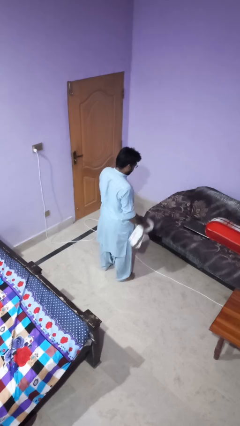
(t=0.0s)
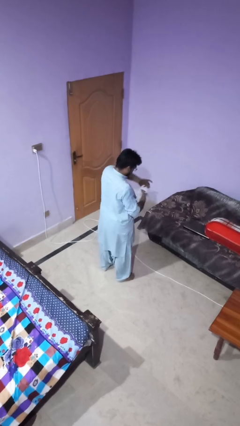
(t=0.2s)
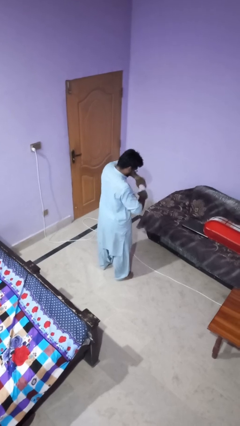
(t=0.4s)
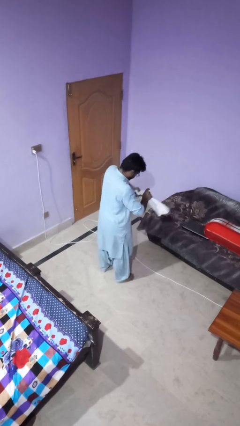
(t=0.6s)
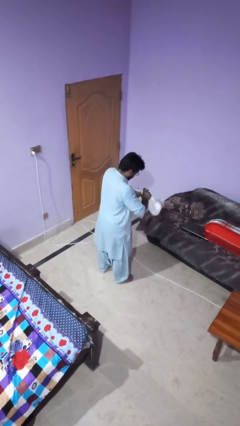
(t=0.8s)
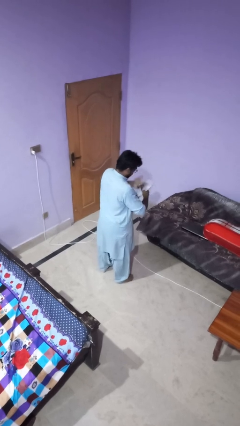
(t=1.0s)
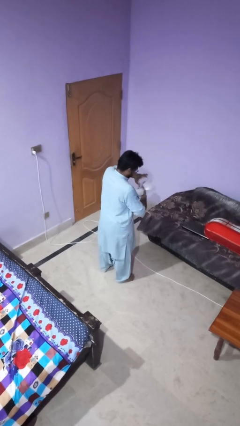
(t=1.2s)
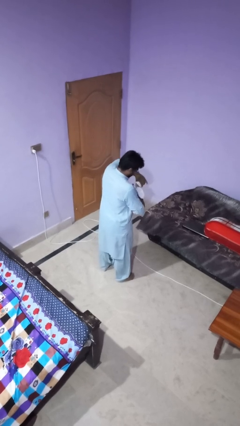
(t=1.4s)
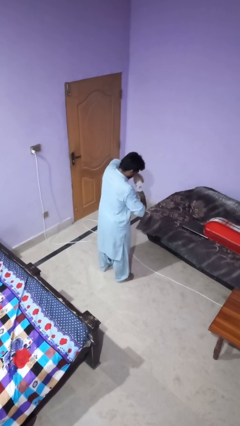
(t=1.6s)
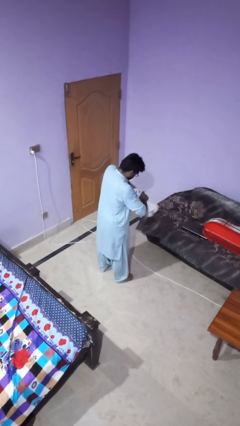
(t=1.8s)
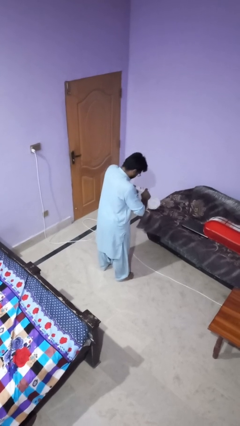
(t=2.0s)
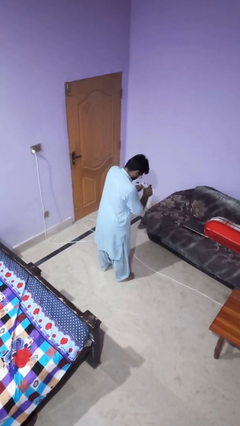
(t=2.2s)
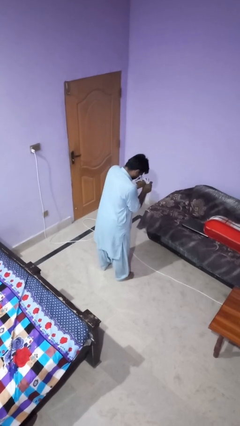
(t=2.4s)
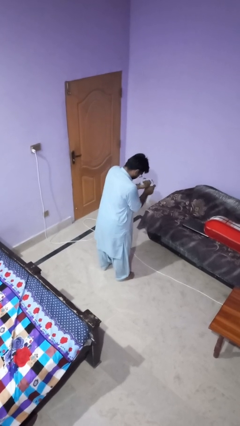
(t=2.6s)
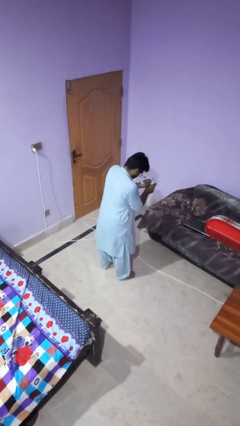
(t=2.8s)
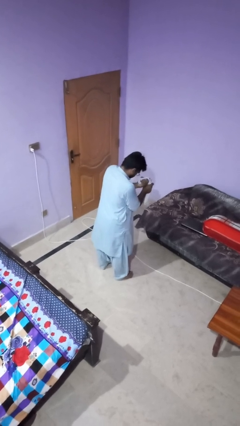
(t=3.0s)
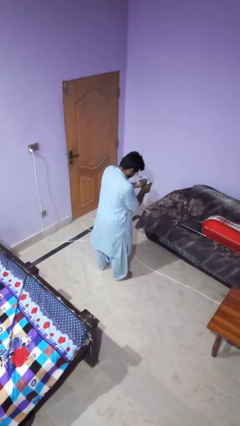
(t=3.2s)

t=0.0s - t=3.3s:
person squeezes object

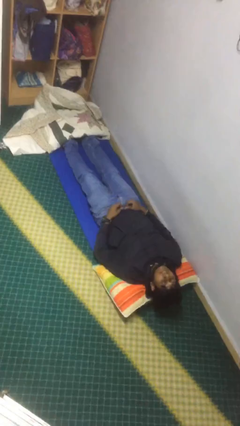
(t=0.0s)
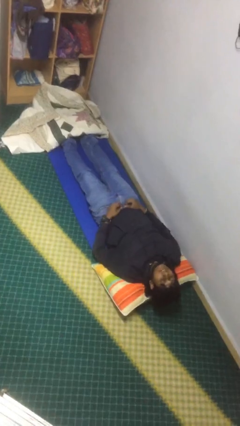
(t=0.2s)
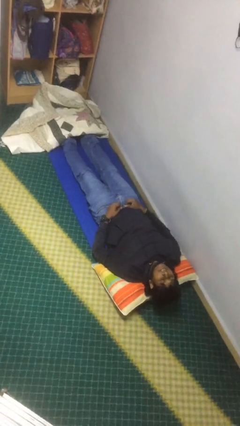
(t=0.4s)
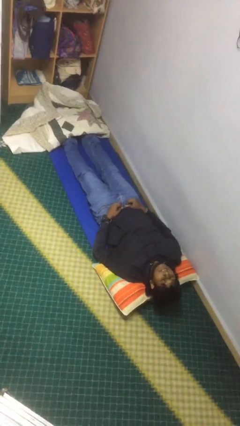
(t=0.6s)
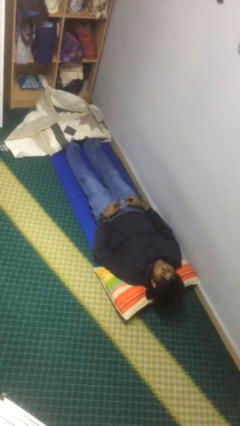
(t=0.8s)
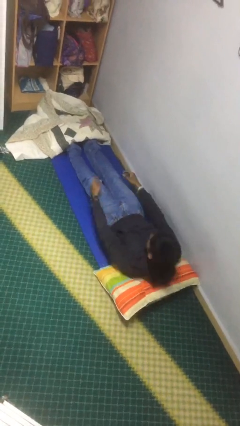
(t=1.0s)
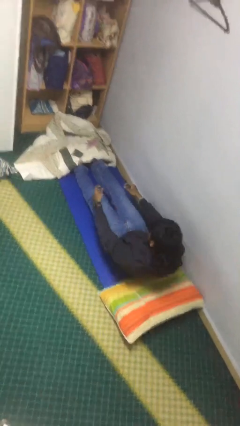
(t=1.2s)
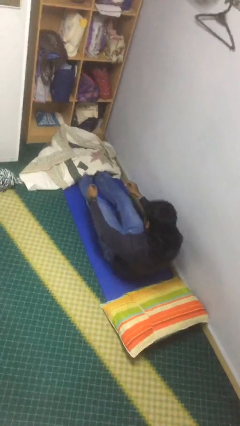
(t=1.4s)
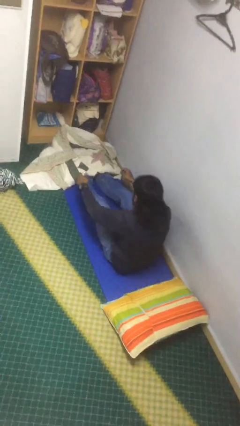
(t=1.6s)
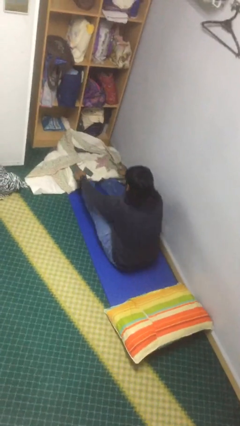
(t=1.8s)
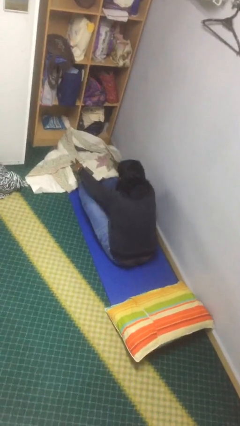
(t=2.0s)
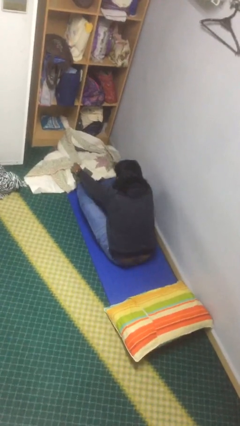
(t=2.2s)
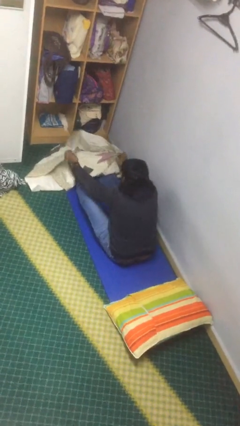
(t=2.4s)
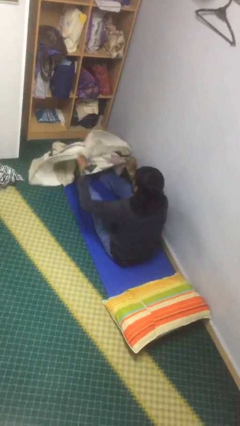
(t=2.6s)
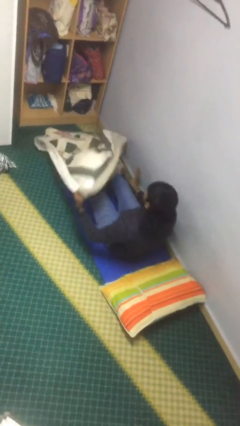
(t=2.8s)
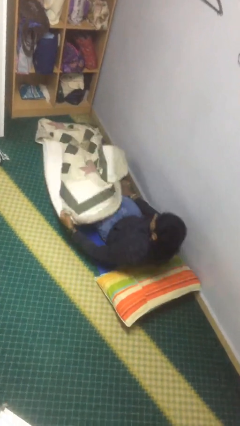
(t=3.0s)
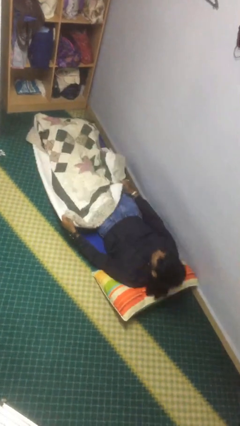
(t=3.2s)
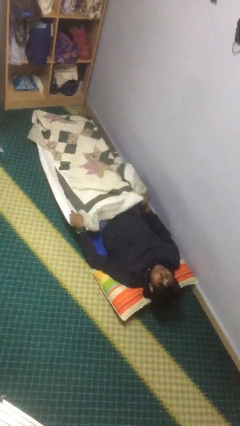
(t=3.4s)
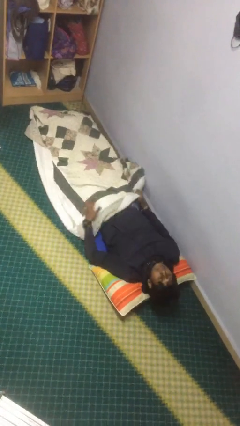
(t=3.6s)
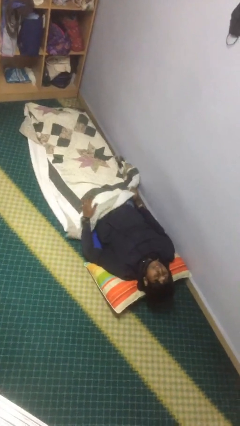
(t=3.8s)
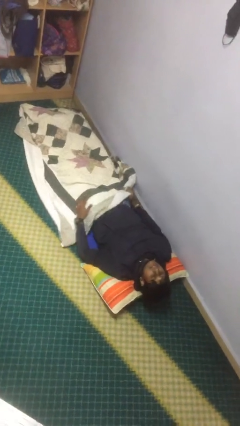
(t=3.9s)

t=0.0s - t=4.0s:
person covers with bedsheets

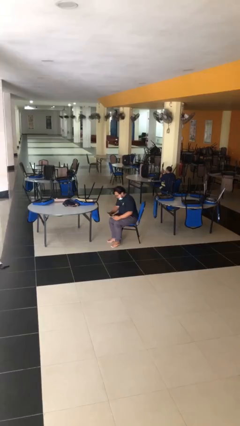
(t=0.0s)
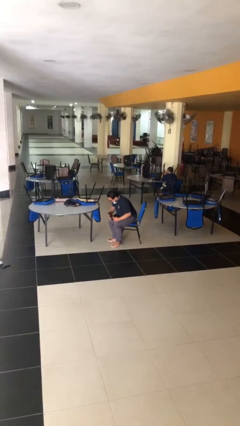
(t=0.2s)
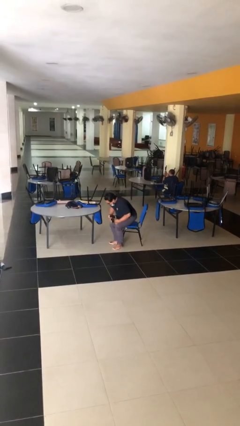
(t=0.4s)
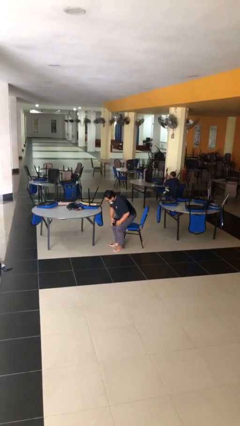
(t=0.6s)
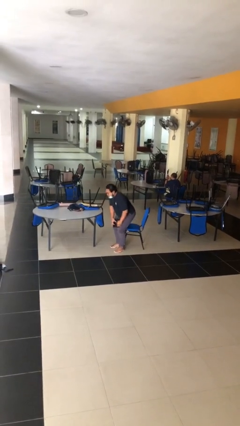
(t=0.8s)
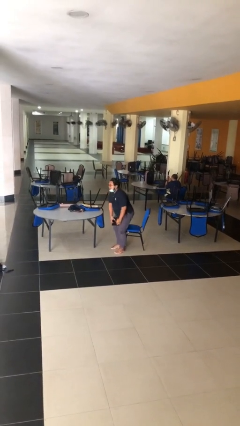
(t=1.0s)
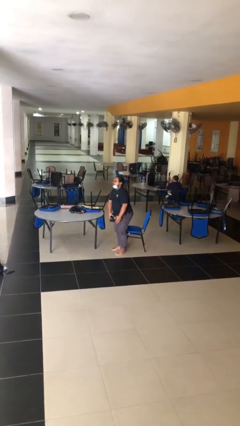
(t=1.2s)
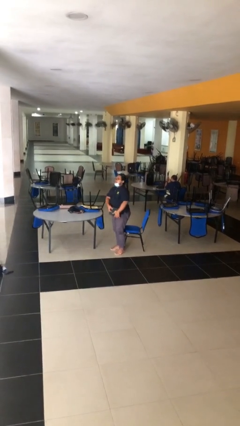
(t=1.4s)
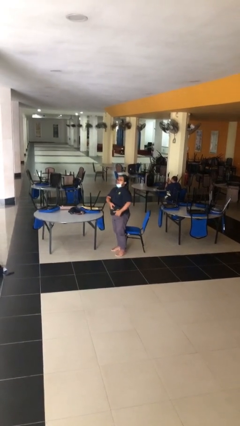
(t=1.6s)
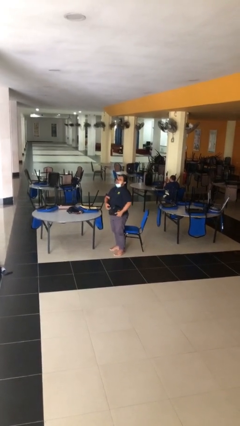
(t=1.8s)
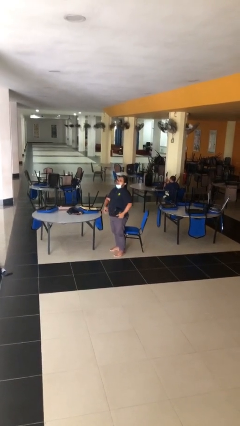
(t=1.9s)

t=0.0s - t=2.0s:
person stands up

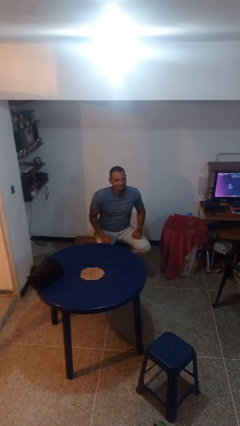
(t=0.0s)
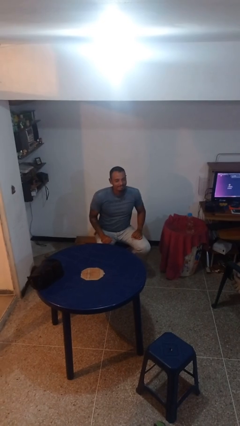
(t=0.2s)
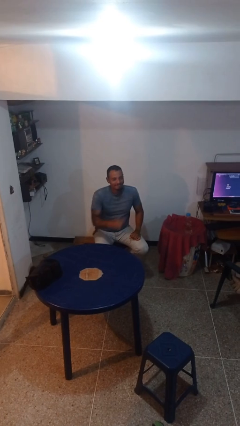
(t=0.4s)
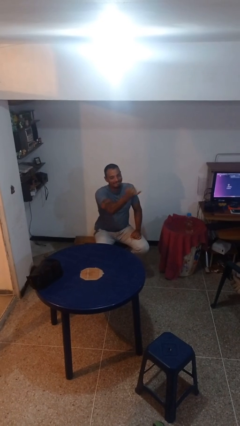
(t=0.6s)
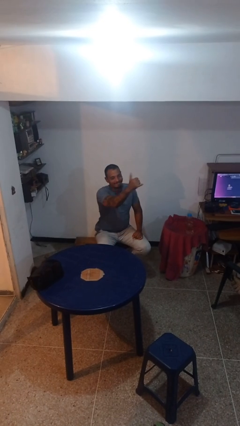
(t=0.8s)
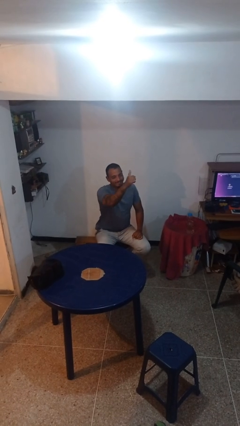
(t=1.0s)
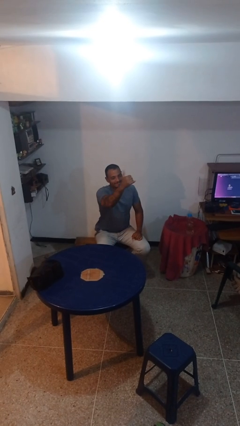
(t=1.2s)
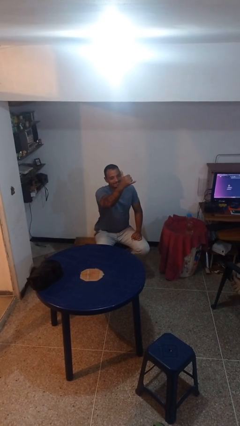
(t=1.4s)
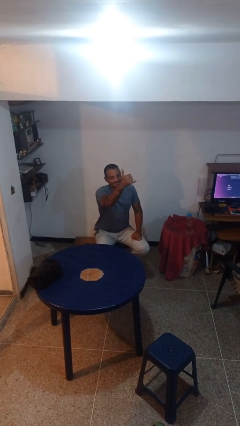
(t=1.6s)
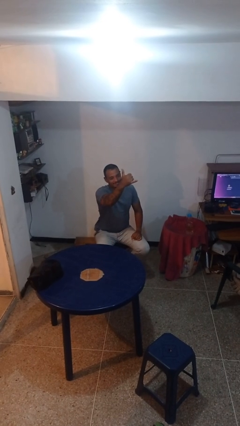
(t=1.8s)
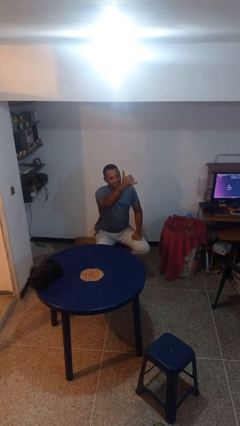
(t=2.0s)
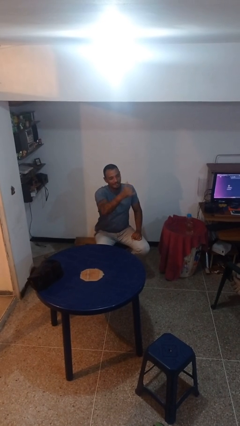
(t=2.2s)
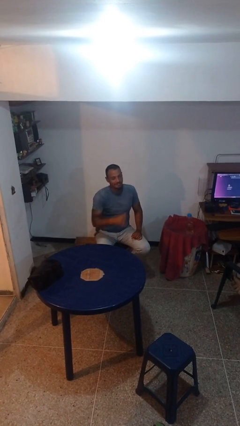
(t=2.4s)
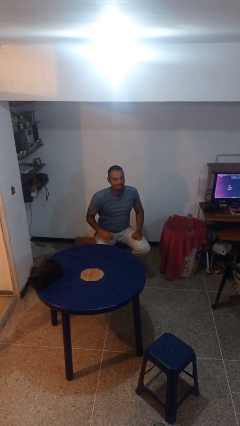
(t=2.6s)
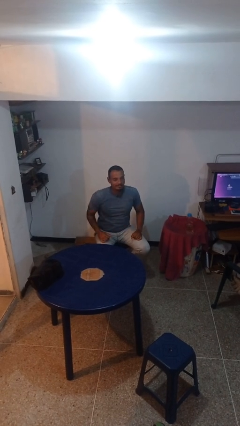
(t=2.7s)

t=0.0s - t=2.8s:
person gestures hang loose

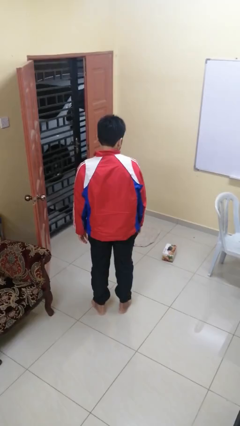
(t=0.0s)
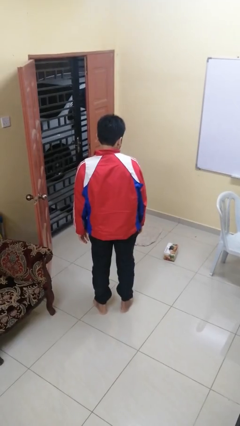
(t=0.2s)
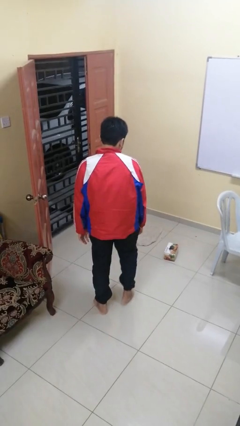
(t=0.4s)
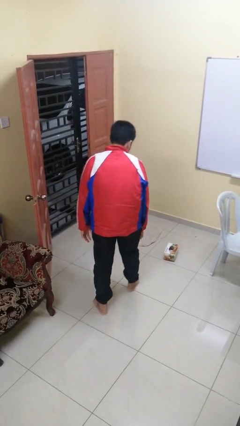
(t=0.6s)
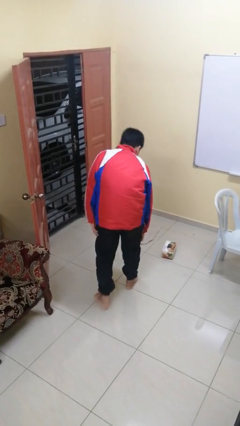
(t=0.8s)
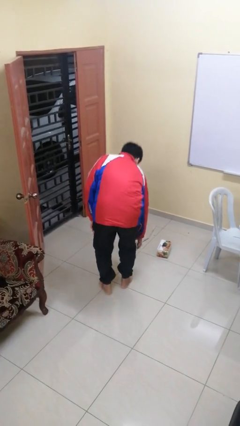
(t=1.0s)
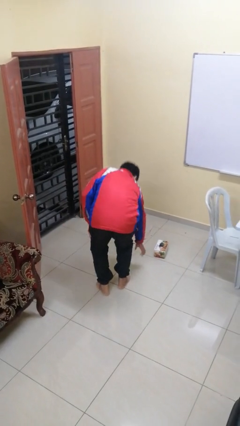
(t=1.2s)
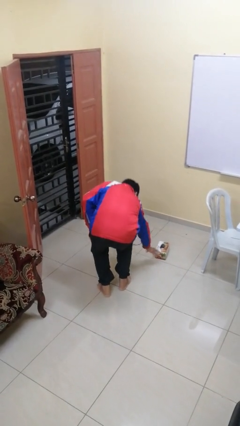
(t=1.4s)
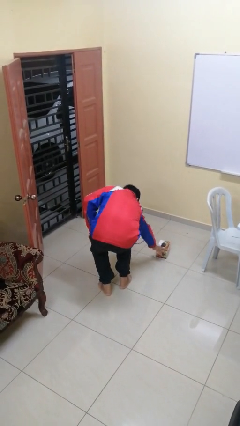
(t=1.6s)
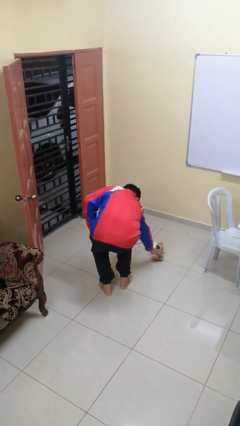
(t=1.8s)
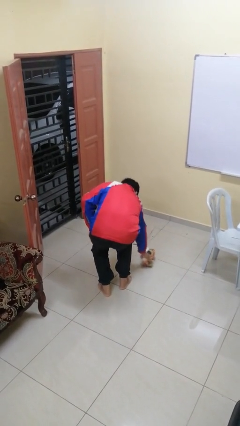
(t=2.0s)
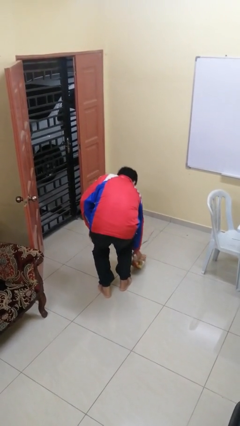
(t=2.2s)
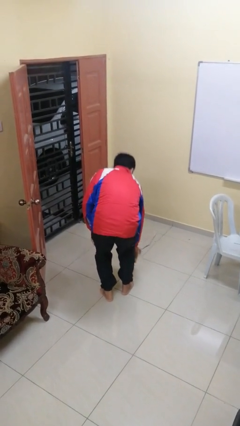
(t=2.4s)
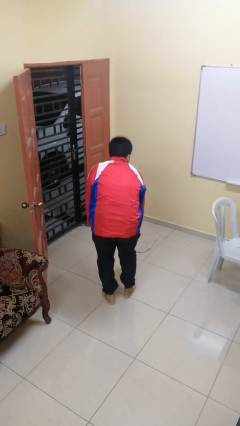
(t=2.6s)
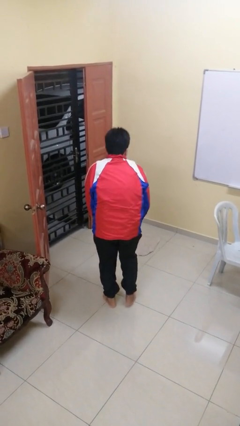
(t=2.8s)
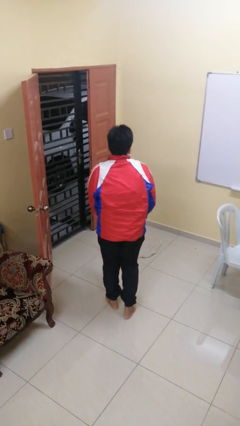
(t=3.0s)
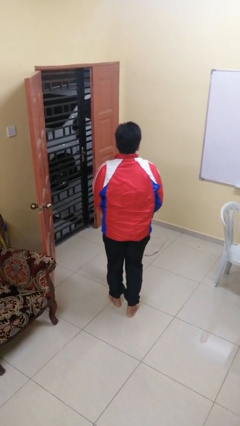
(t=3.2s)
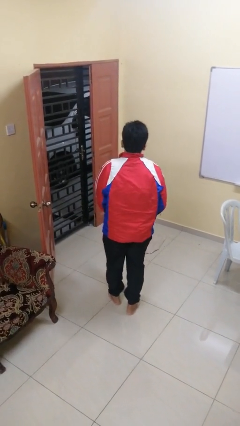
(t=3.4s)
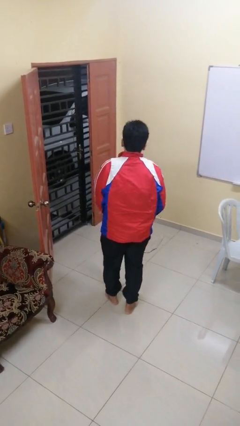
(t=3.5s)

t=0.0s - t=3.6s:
person picks up object from floor

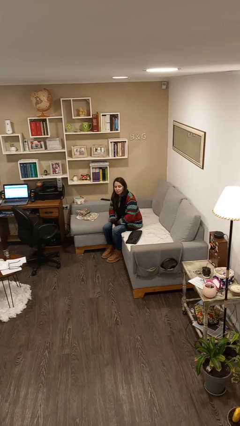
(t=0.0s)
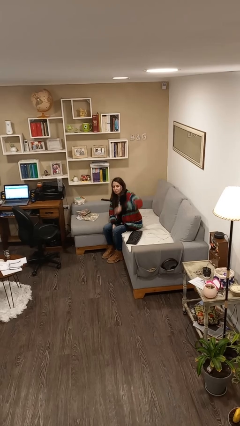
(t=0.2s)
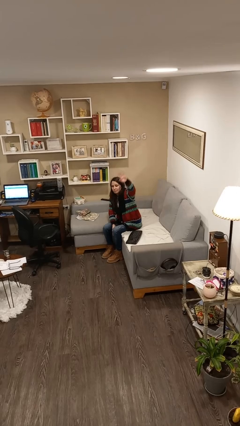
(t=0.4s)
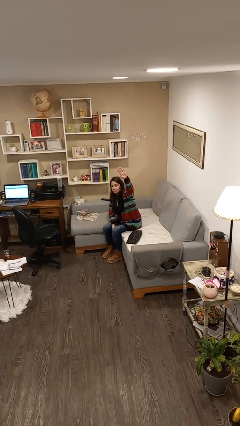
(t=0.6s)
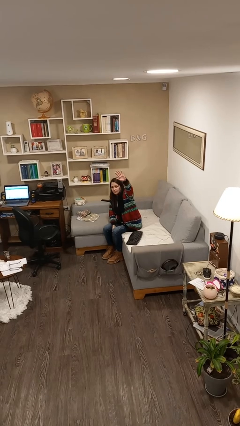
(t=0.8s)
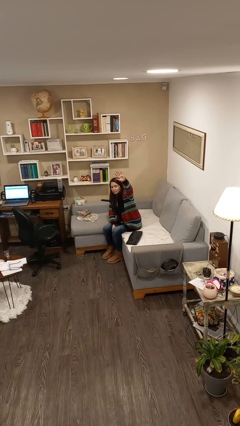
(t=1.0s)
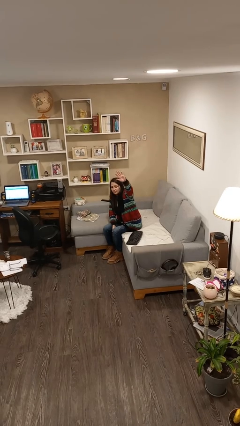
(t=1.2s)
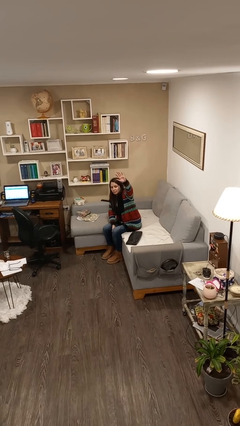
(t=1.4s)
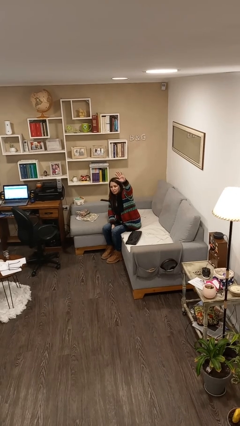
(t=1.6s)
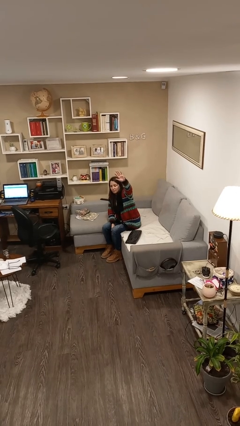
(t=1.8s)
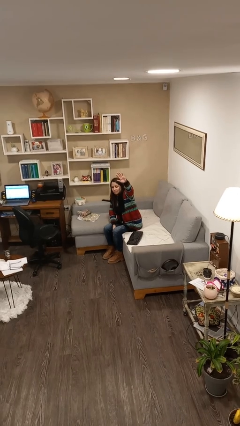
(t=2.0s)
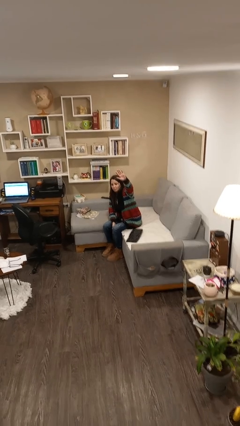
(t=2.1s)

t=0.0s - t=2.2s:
person gestures raise hand
